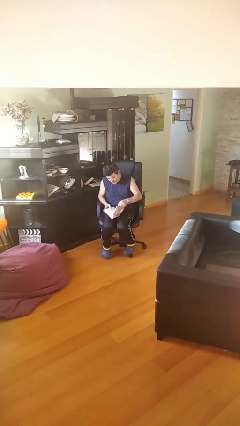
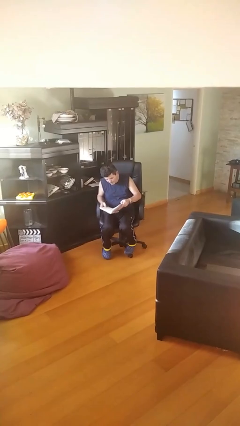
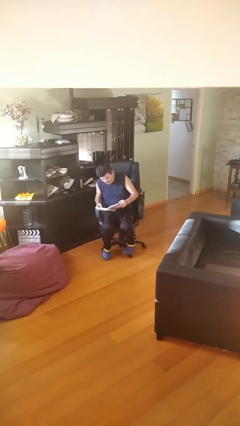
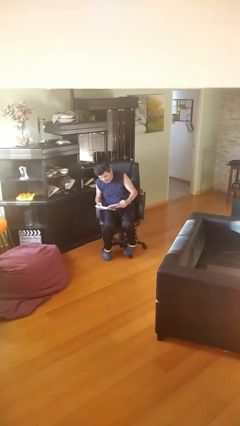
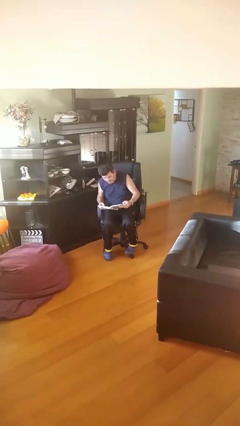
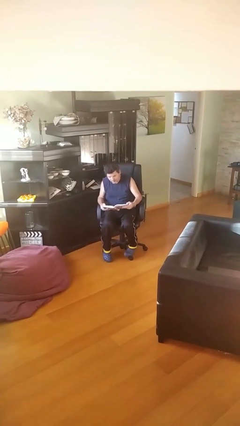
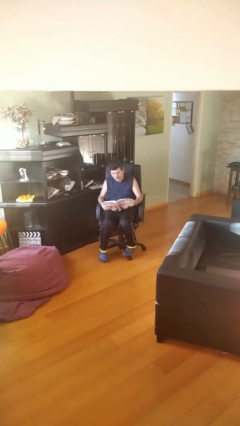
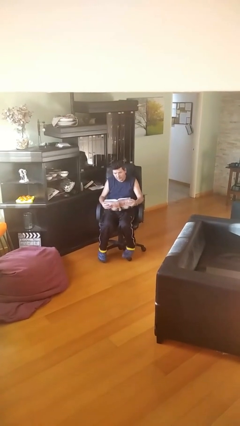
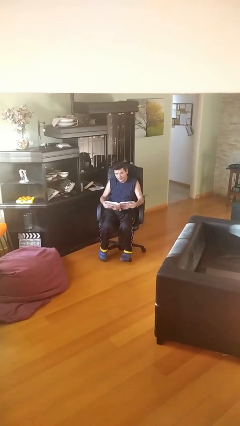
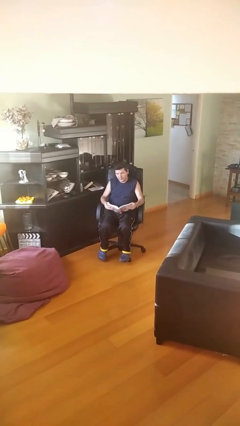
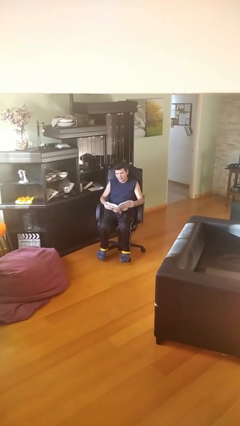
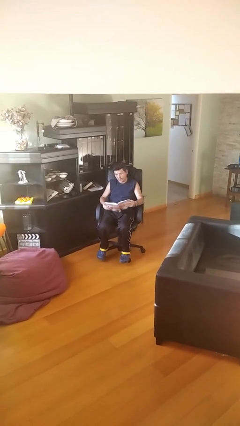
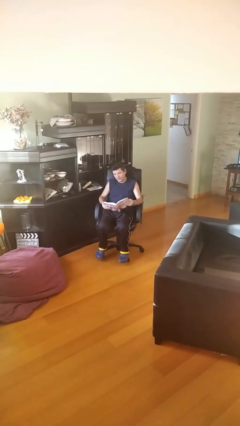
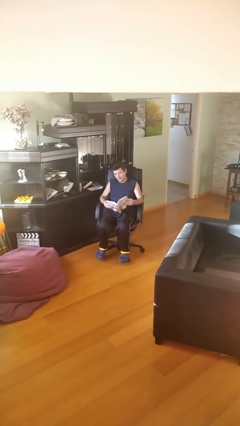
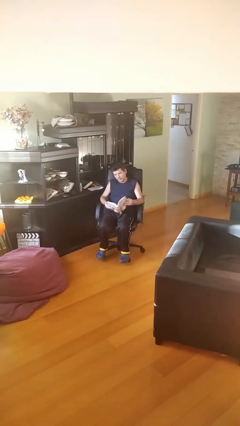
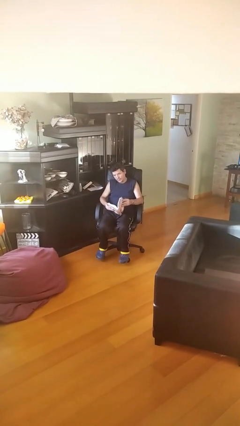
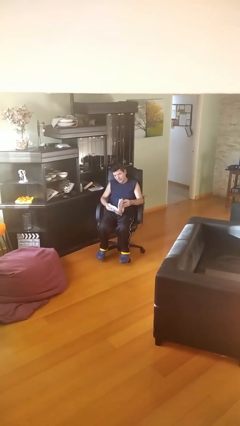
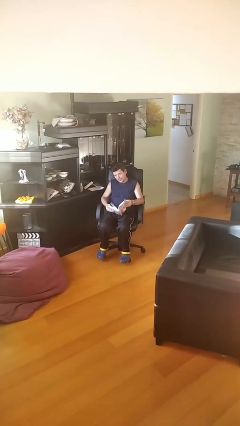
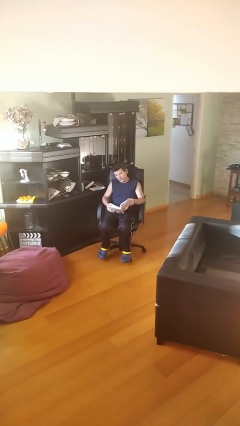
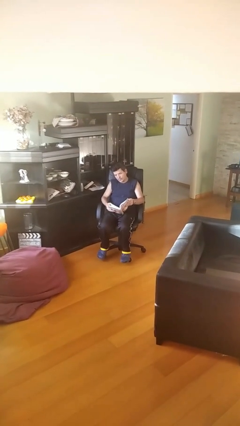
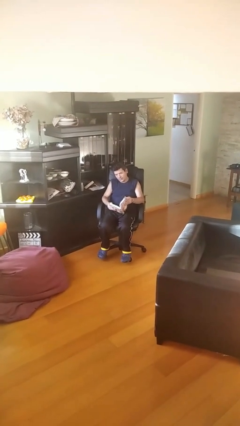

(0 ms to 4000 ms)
person reads document

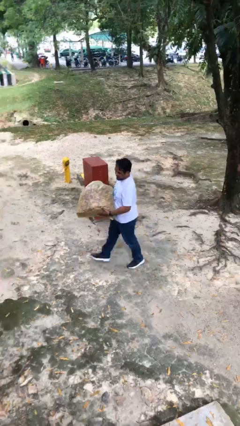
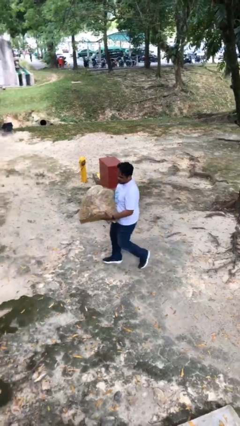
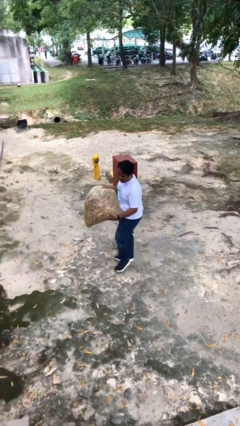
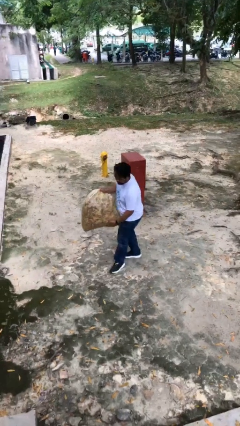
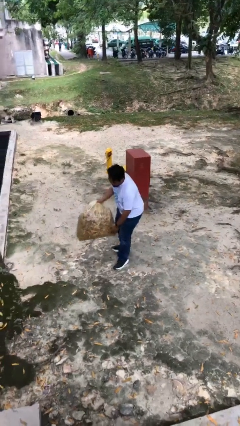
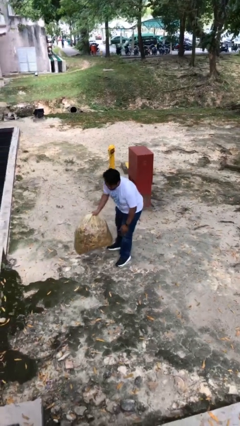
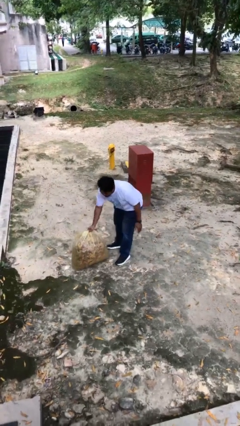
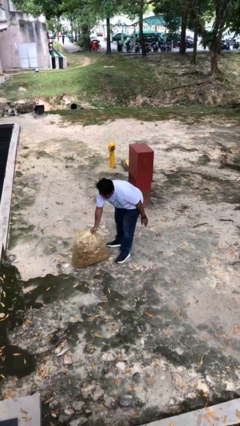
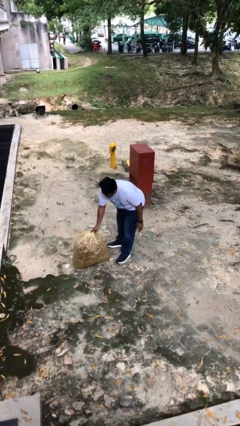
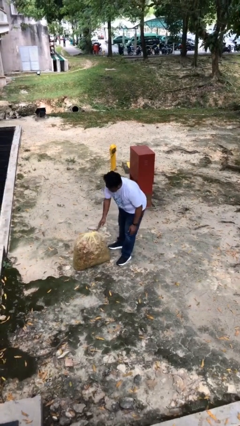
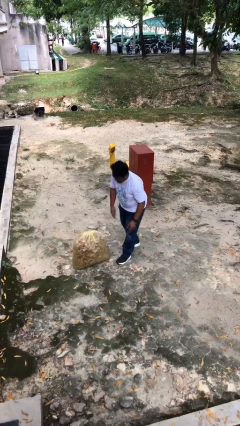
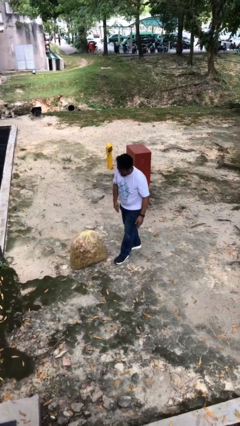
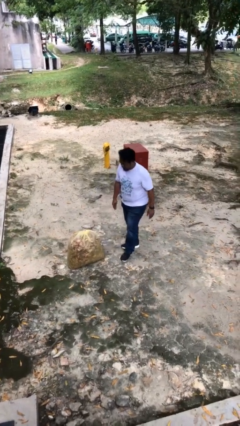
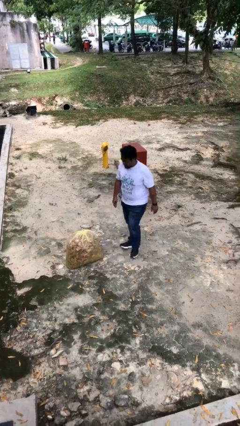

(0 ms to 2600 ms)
person puts down object on floor

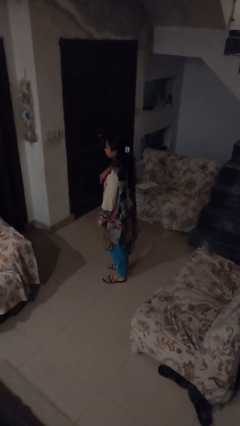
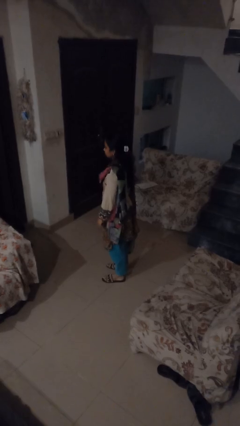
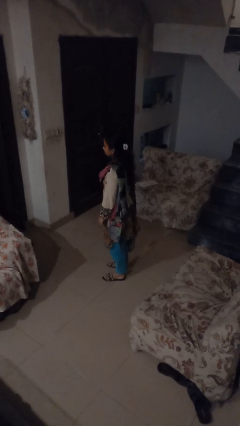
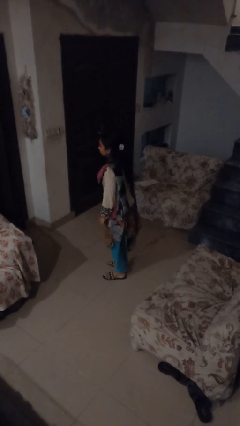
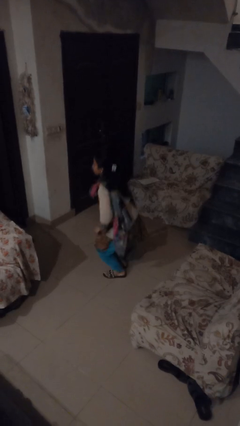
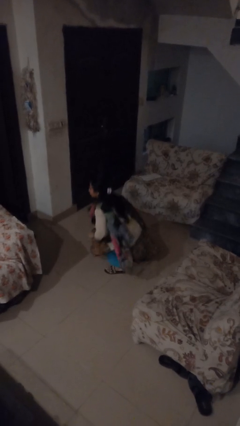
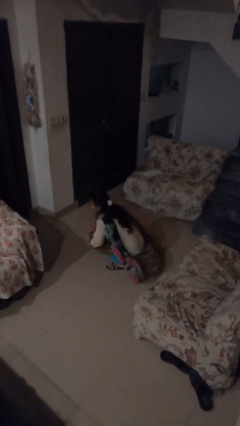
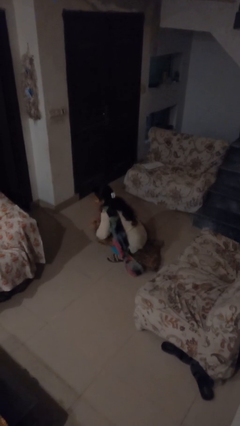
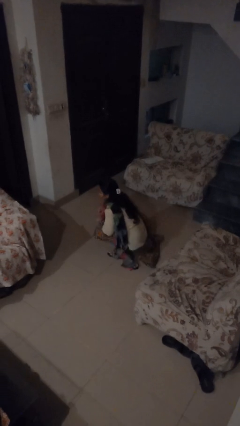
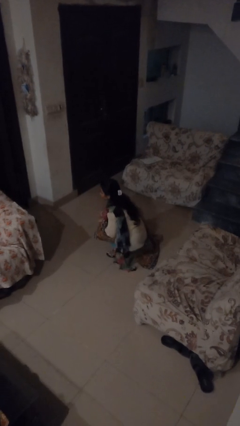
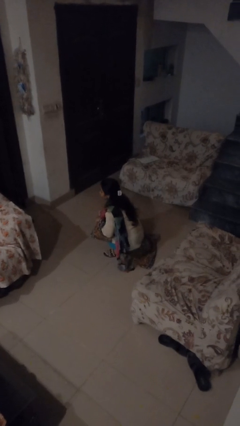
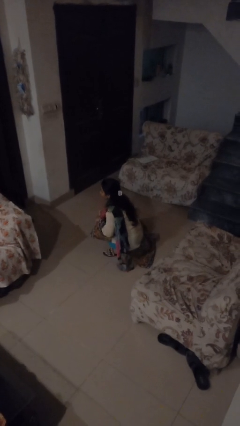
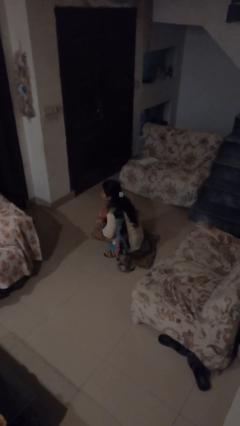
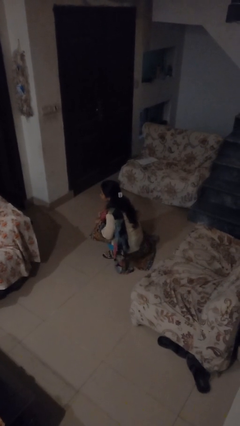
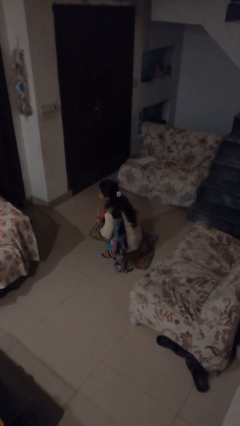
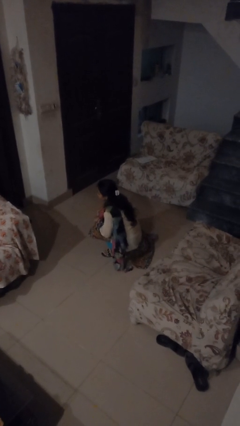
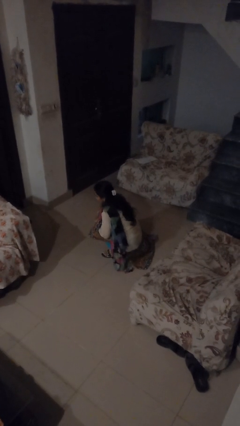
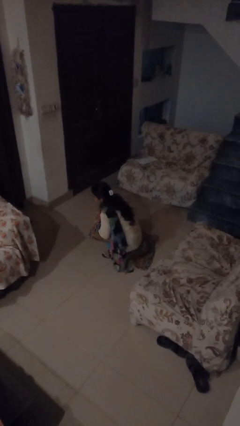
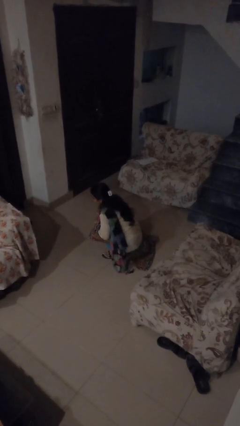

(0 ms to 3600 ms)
person squats

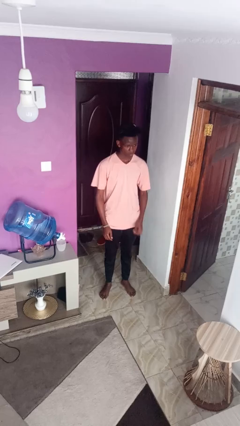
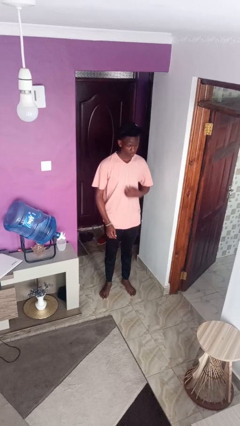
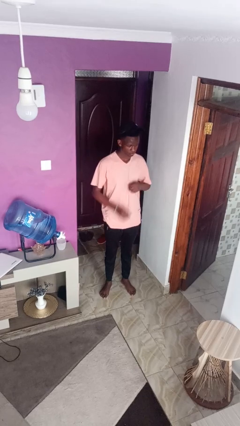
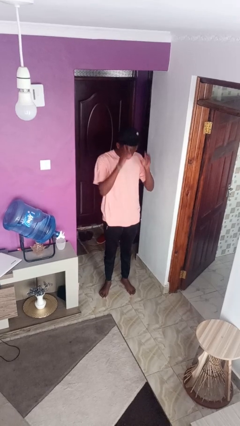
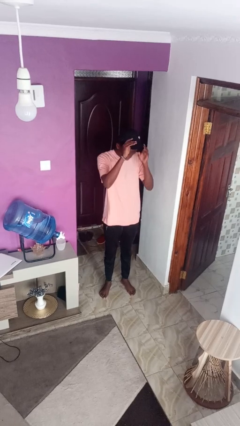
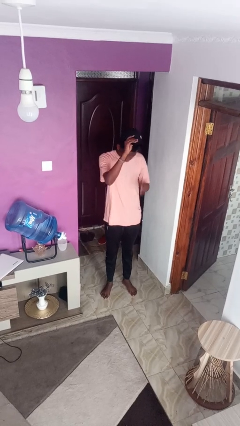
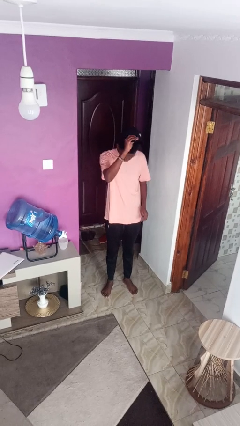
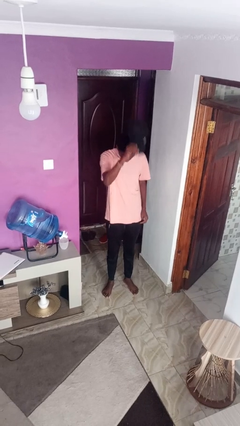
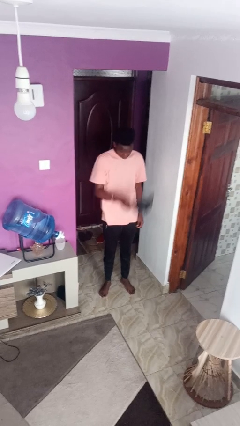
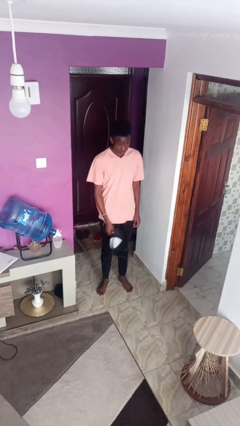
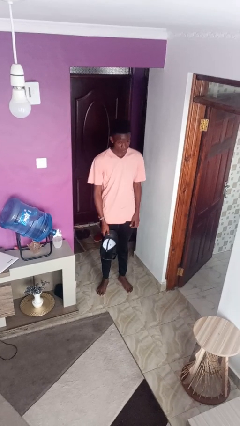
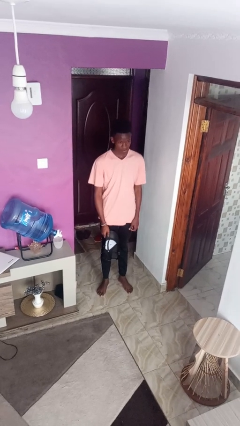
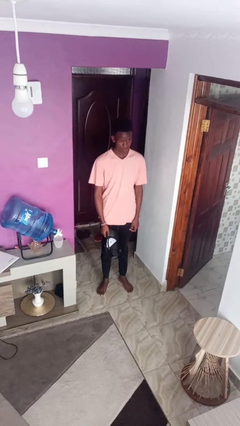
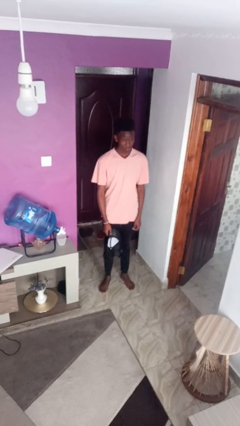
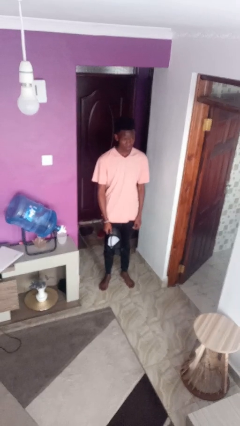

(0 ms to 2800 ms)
person takes off hat

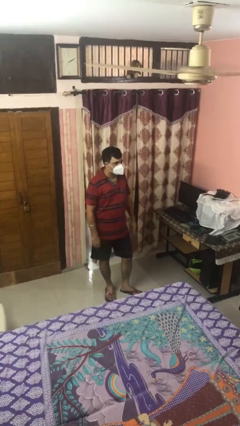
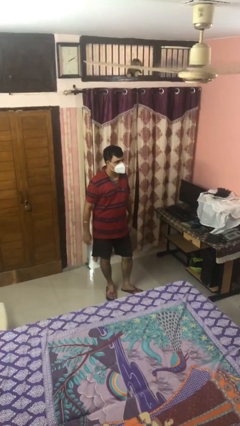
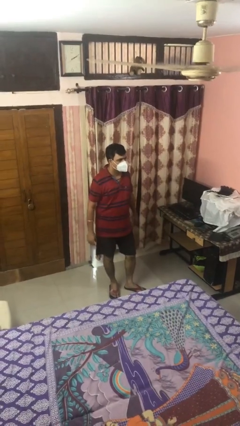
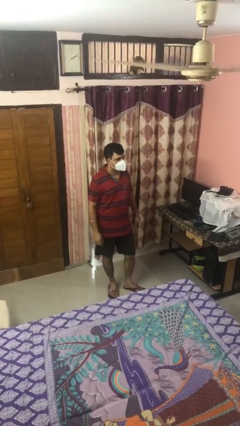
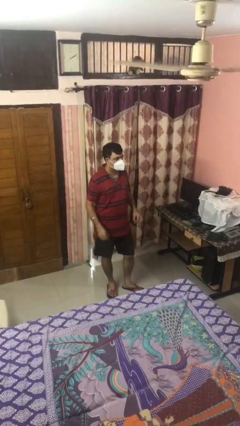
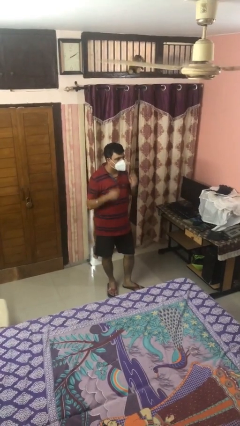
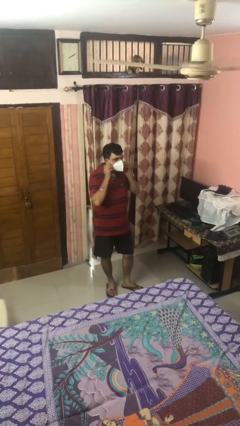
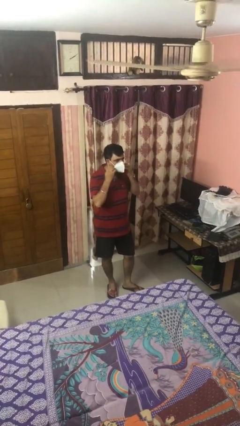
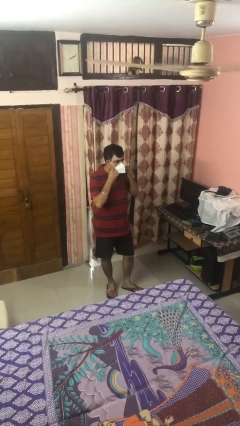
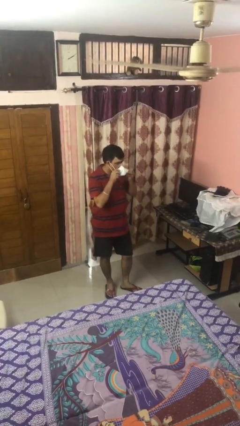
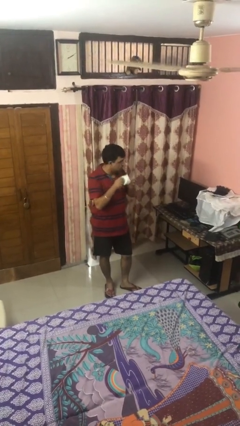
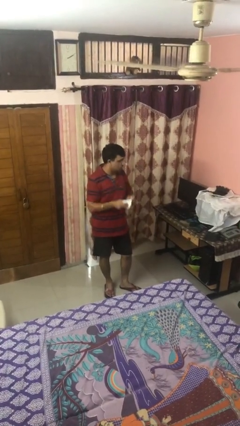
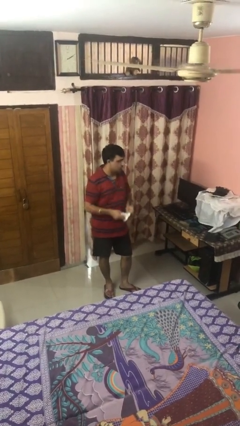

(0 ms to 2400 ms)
person takes off facemask

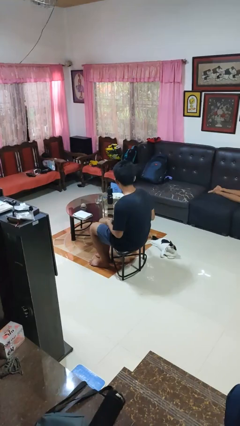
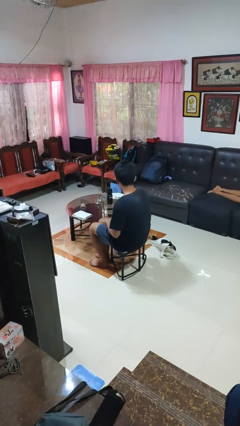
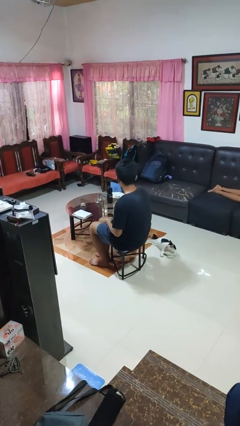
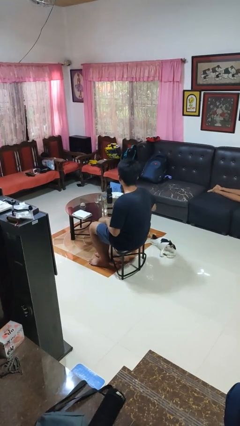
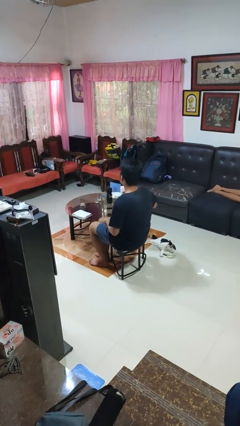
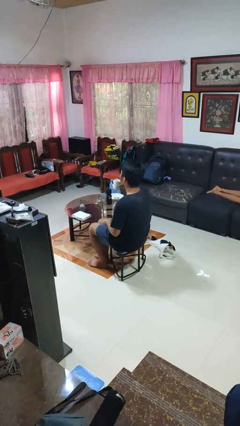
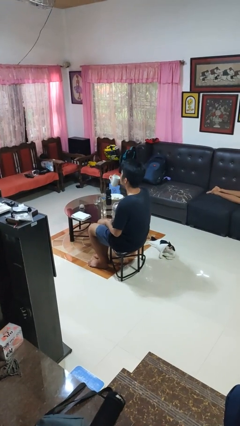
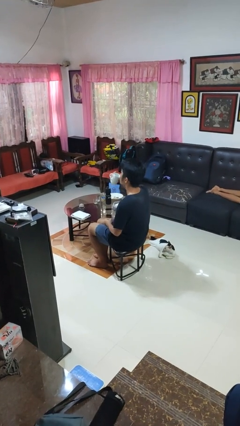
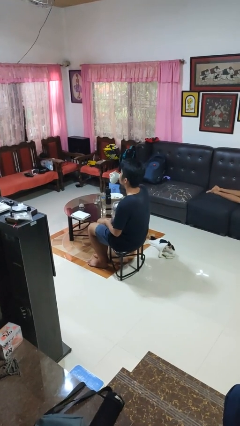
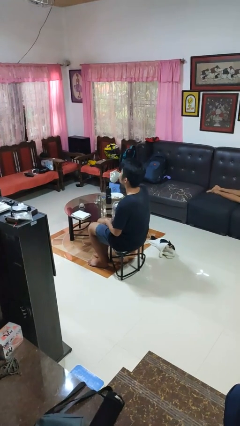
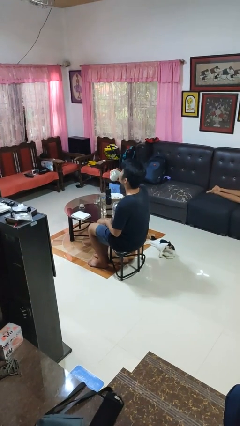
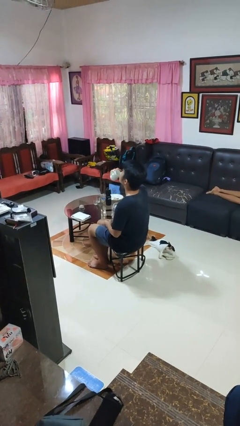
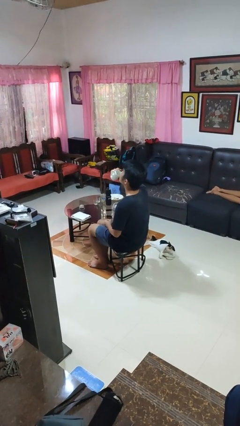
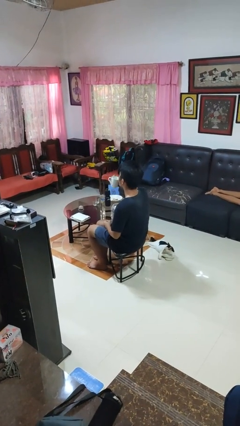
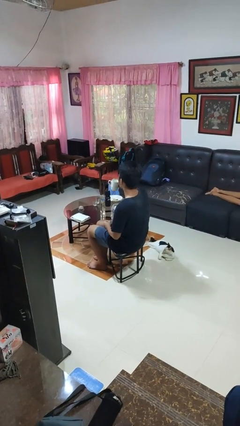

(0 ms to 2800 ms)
person drinks from cup
